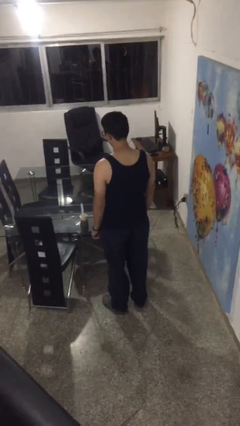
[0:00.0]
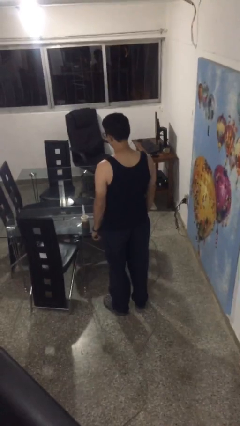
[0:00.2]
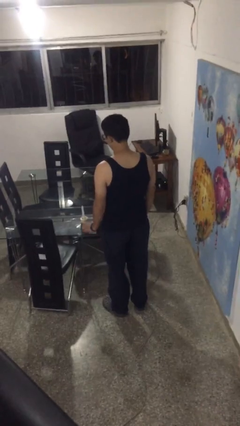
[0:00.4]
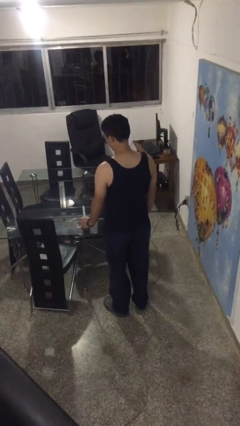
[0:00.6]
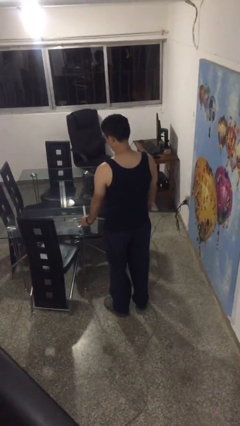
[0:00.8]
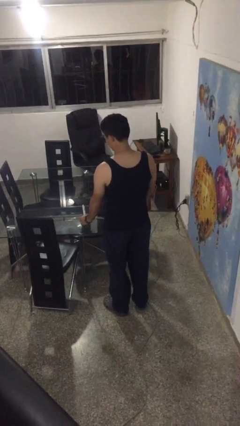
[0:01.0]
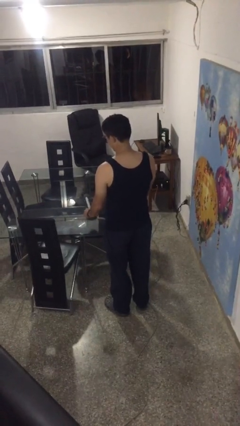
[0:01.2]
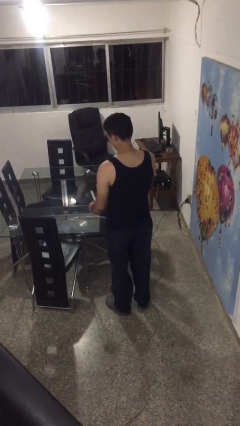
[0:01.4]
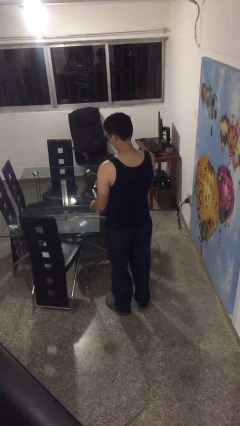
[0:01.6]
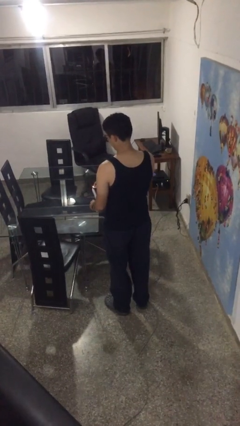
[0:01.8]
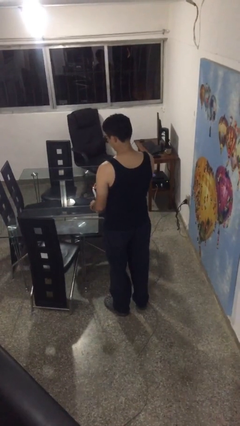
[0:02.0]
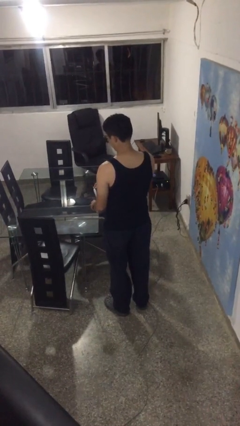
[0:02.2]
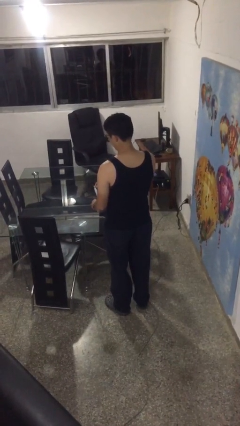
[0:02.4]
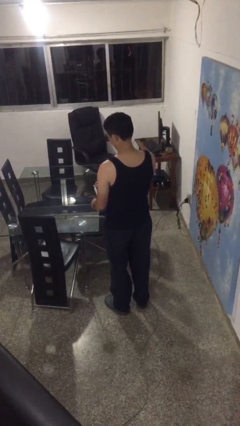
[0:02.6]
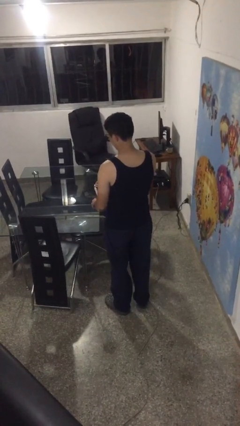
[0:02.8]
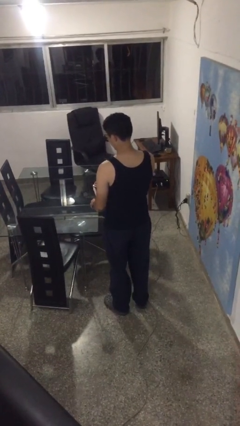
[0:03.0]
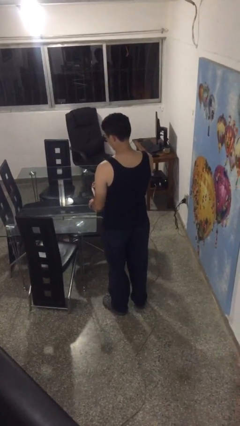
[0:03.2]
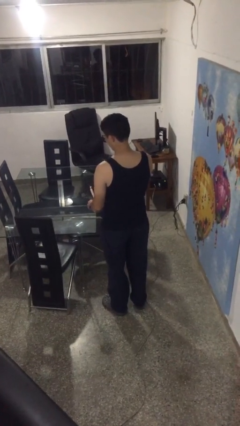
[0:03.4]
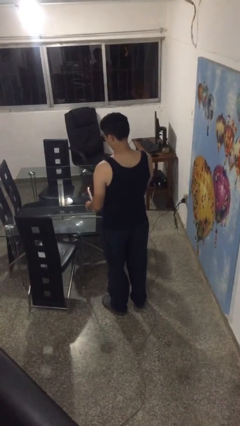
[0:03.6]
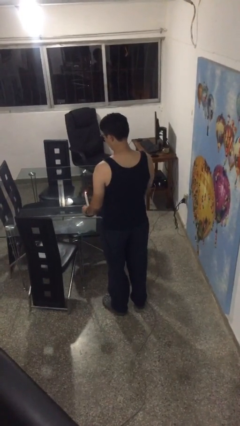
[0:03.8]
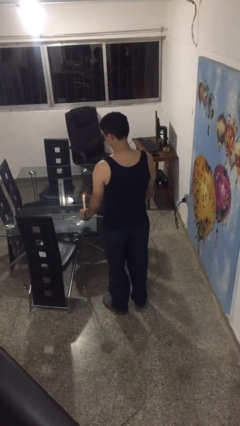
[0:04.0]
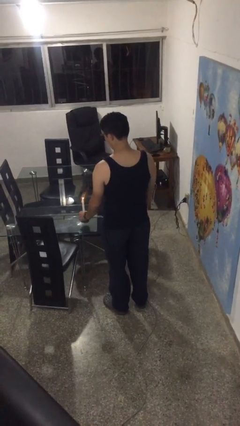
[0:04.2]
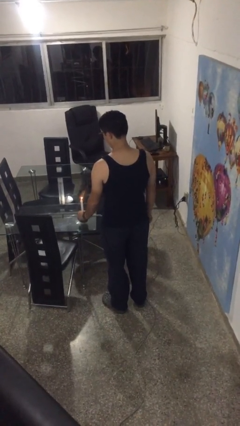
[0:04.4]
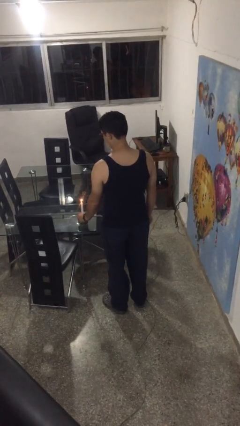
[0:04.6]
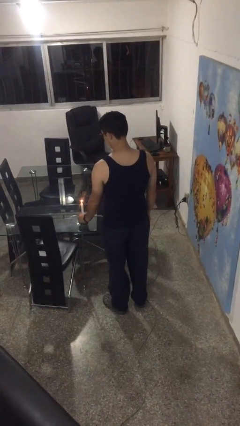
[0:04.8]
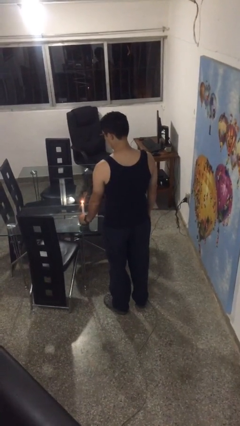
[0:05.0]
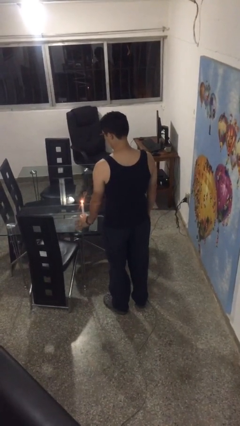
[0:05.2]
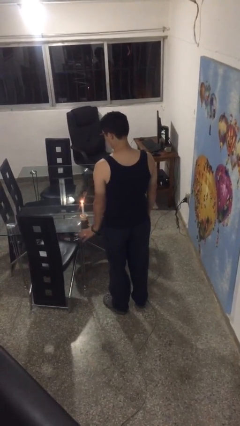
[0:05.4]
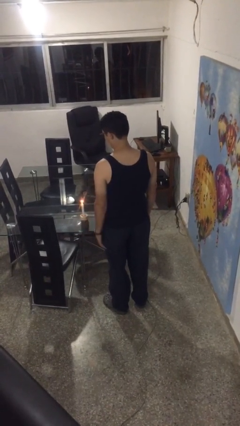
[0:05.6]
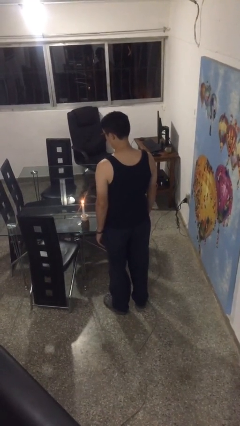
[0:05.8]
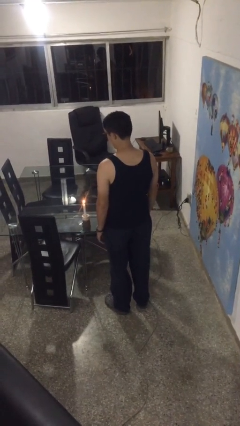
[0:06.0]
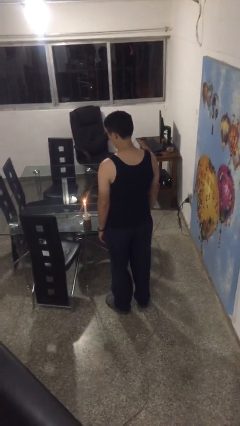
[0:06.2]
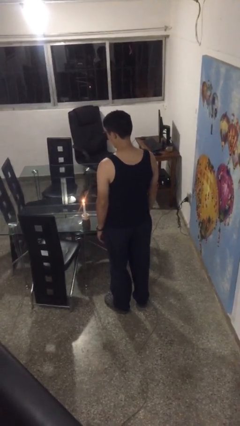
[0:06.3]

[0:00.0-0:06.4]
person lights candle

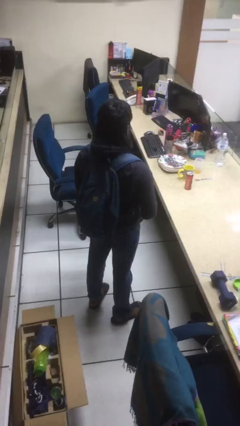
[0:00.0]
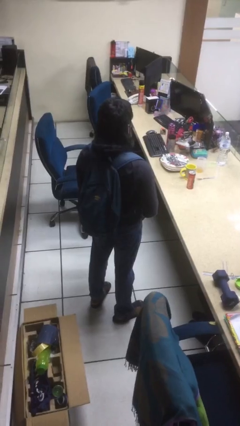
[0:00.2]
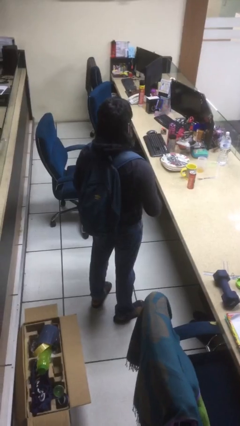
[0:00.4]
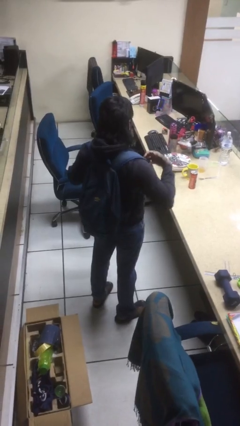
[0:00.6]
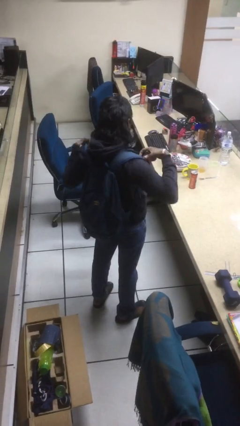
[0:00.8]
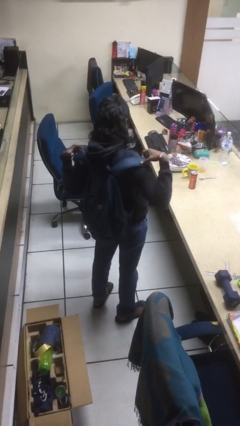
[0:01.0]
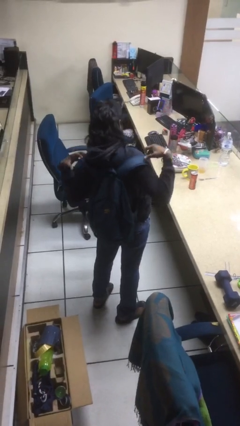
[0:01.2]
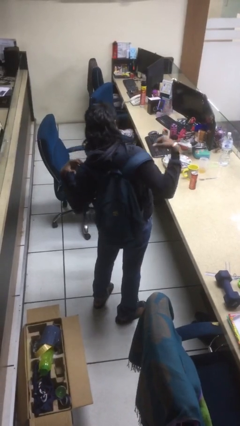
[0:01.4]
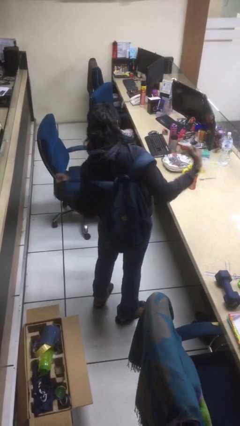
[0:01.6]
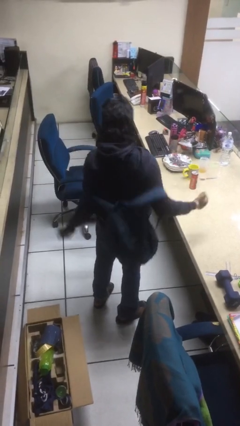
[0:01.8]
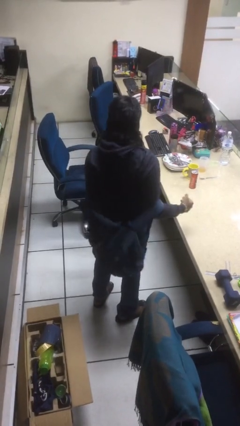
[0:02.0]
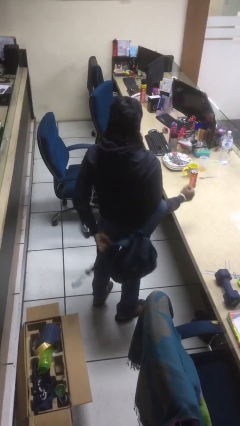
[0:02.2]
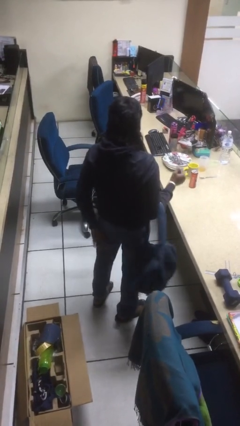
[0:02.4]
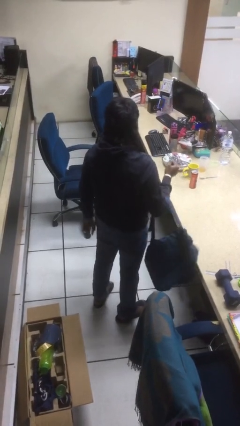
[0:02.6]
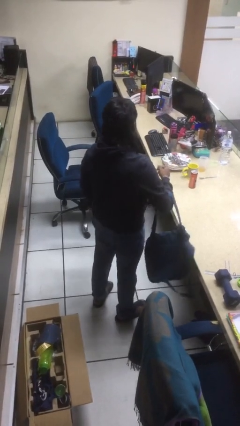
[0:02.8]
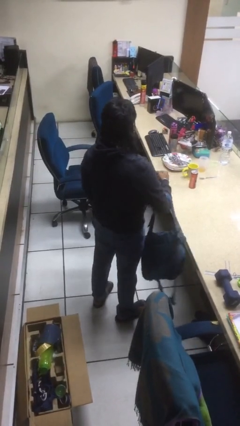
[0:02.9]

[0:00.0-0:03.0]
person takes off backpack

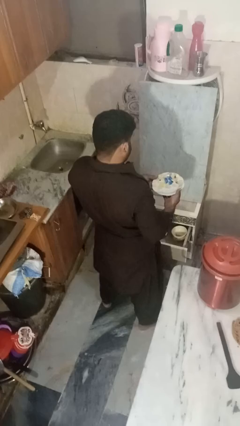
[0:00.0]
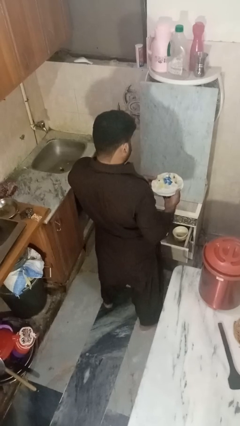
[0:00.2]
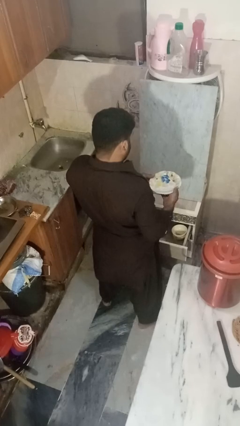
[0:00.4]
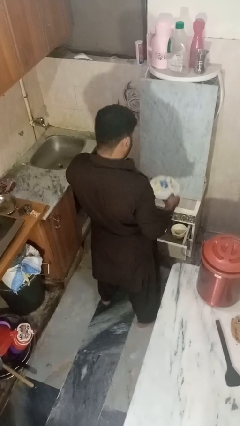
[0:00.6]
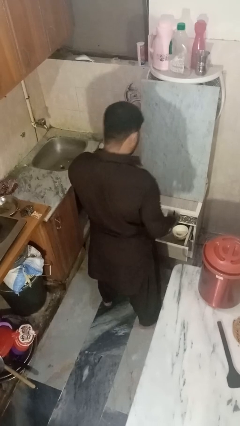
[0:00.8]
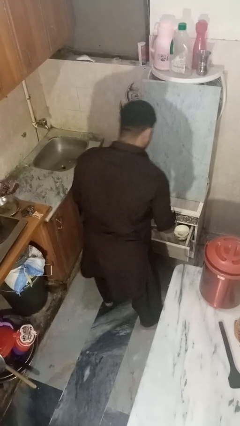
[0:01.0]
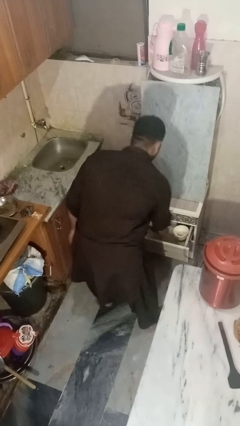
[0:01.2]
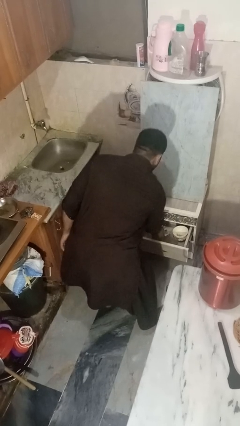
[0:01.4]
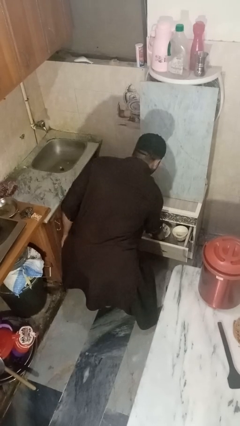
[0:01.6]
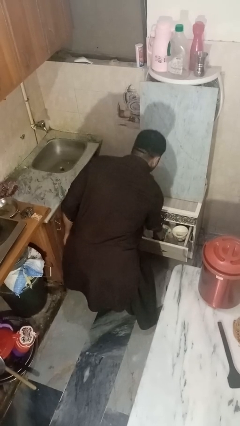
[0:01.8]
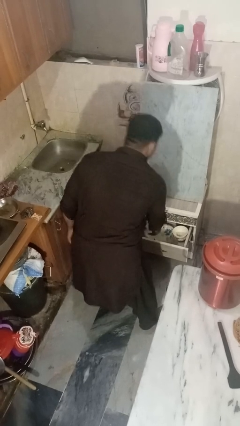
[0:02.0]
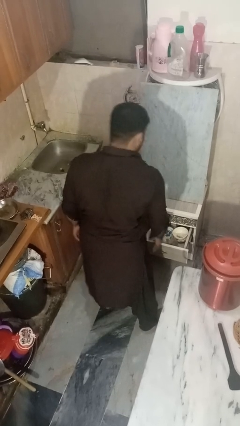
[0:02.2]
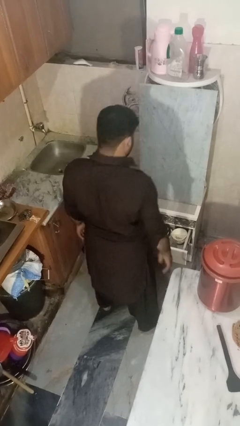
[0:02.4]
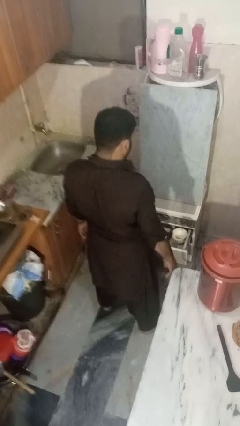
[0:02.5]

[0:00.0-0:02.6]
person puts object into kitchen drawer

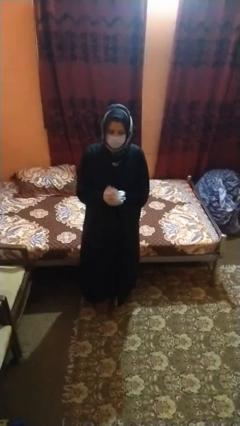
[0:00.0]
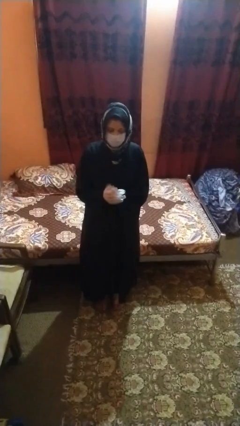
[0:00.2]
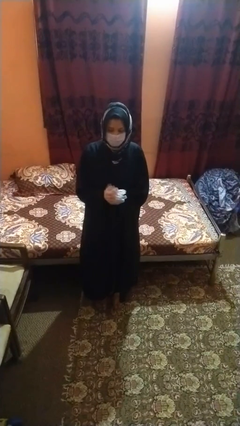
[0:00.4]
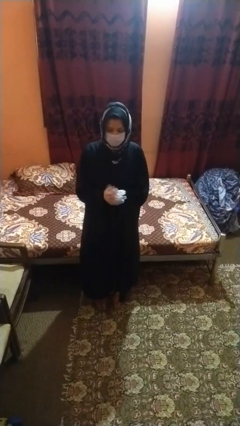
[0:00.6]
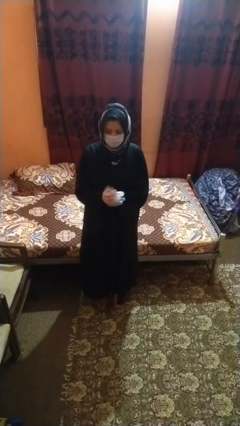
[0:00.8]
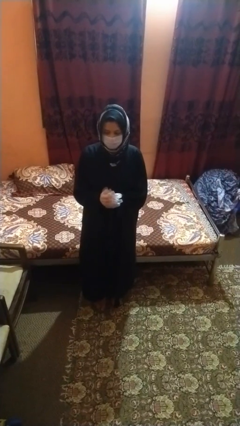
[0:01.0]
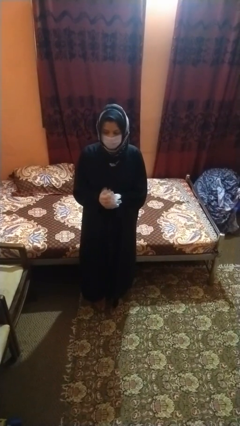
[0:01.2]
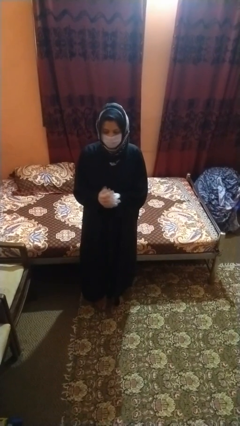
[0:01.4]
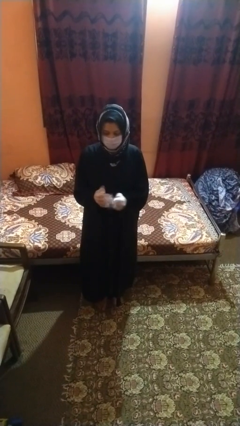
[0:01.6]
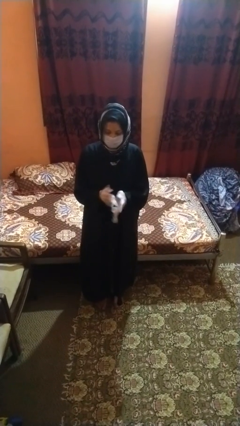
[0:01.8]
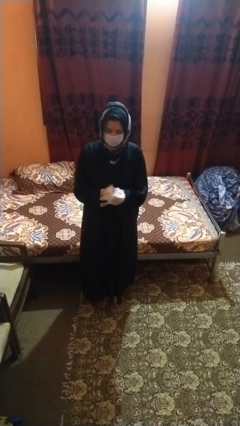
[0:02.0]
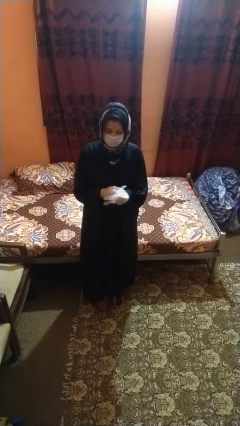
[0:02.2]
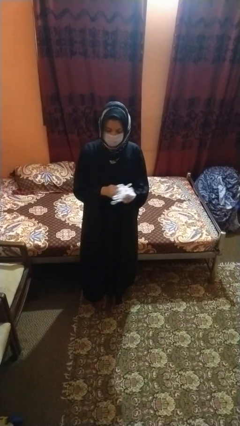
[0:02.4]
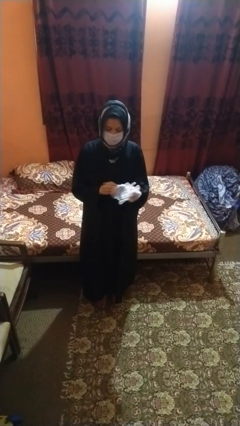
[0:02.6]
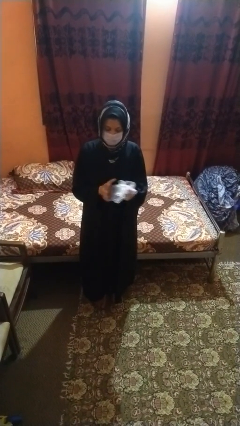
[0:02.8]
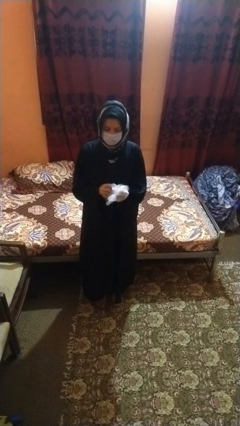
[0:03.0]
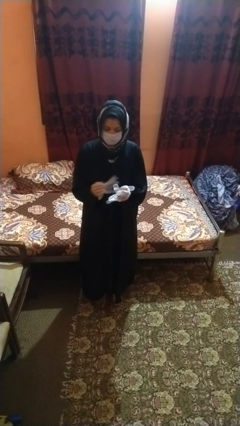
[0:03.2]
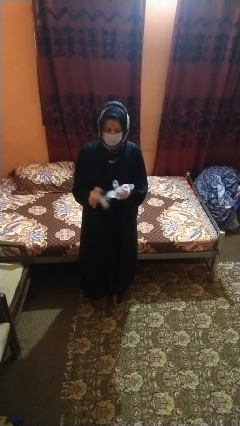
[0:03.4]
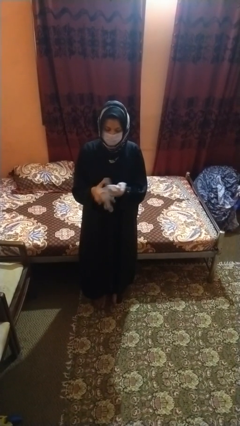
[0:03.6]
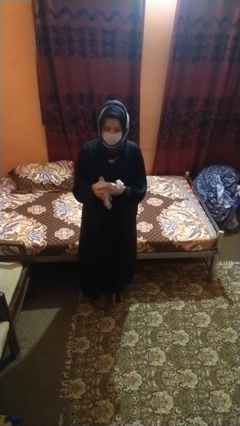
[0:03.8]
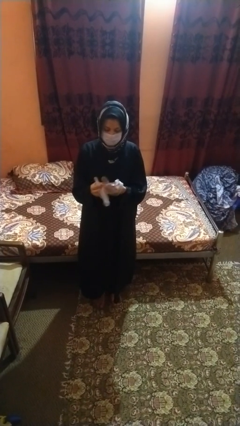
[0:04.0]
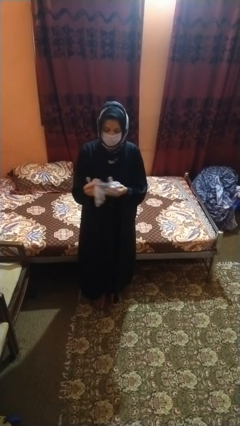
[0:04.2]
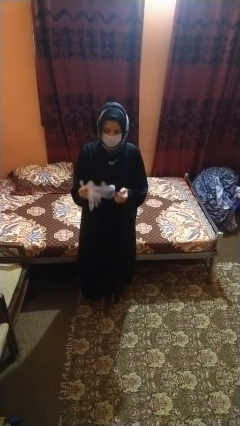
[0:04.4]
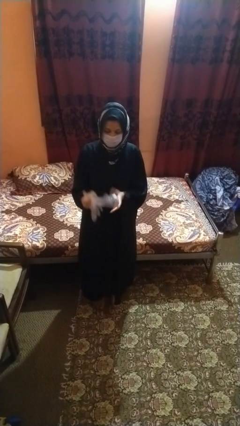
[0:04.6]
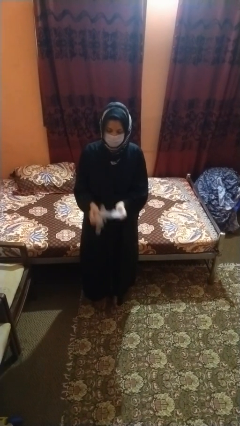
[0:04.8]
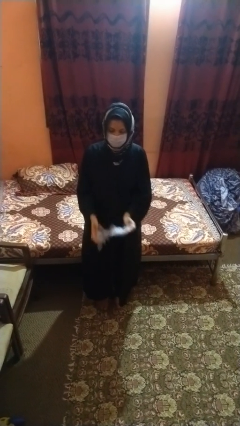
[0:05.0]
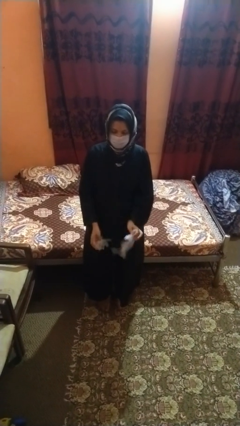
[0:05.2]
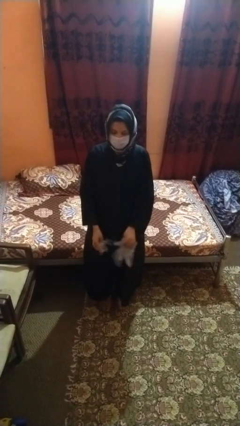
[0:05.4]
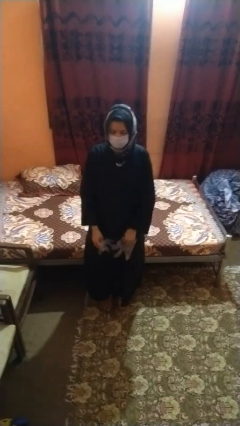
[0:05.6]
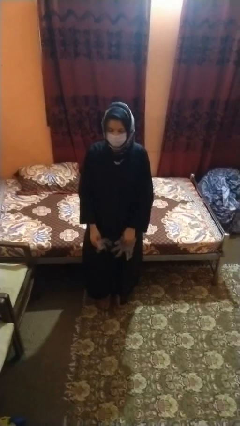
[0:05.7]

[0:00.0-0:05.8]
person takes off gloves

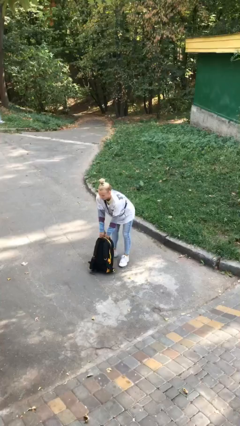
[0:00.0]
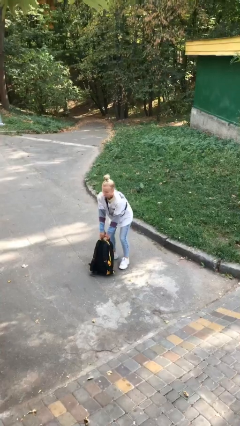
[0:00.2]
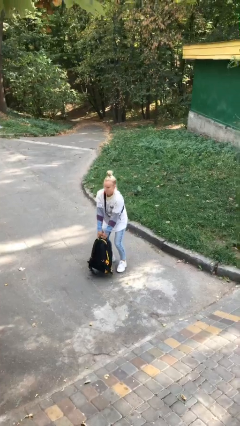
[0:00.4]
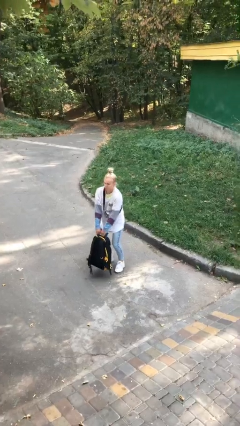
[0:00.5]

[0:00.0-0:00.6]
person picks up object from floor
